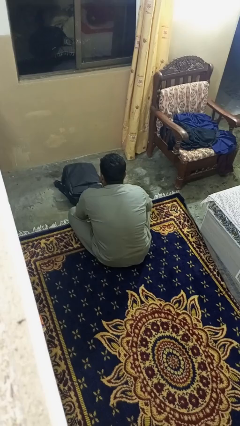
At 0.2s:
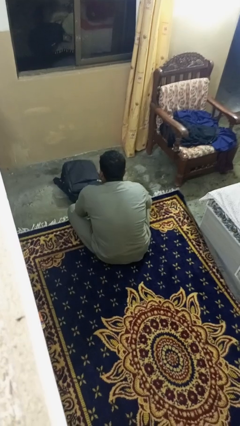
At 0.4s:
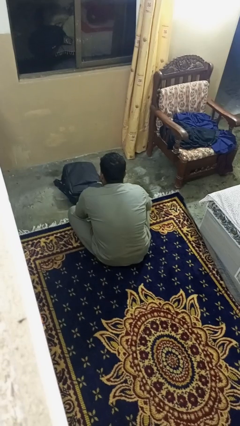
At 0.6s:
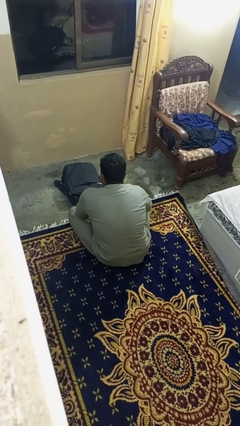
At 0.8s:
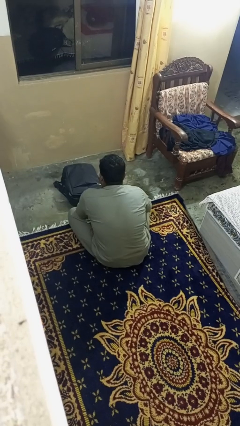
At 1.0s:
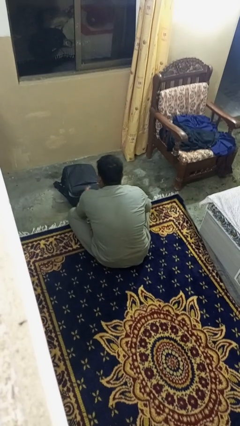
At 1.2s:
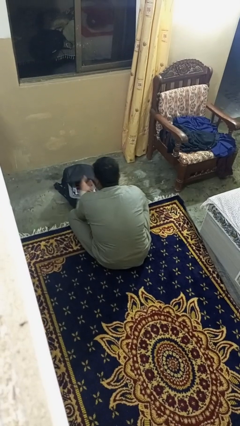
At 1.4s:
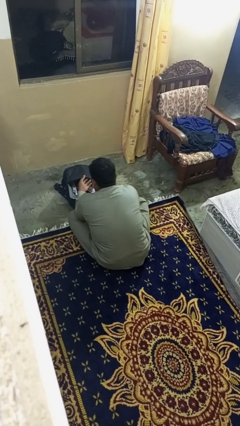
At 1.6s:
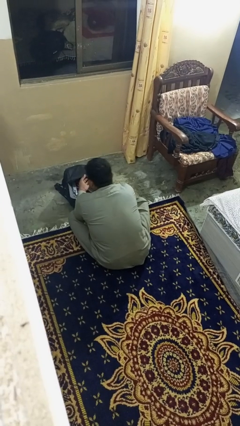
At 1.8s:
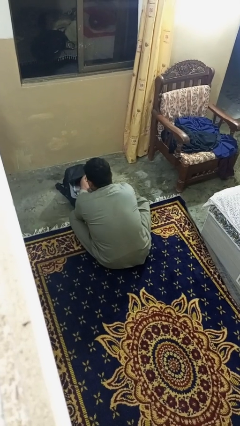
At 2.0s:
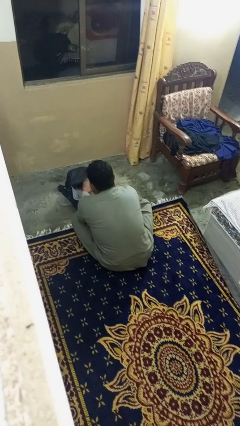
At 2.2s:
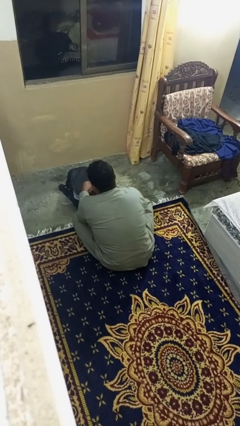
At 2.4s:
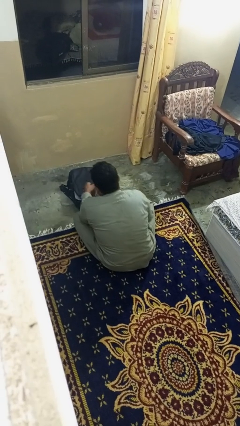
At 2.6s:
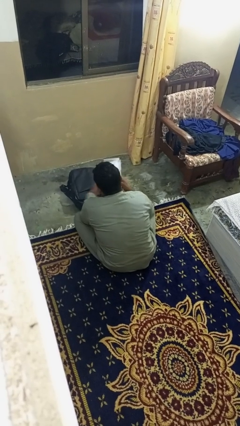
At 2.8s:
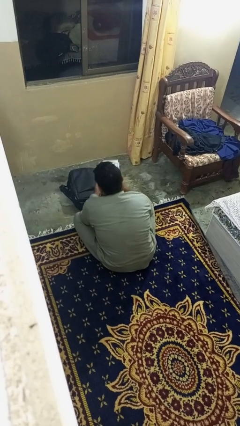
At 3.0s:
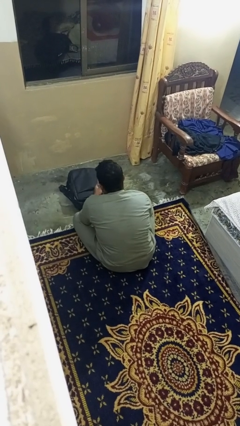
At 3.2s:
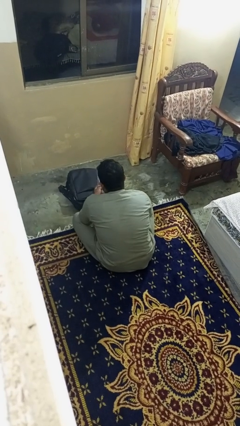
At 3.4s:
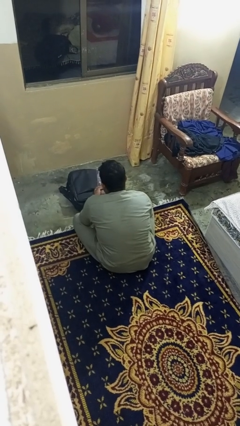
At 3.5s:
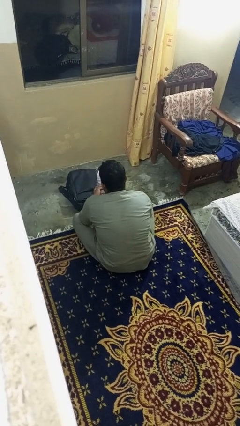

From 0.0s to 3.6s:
person takes object from bag

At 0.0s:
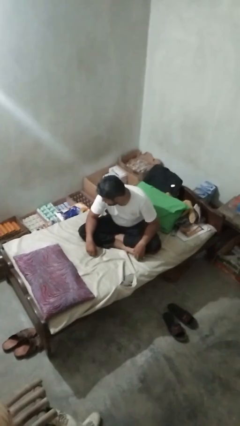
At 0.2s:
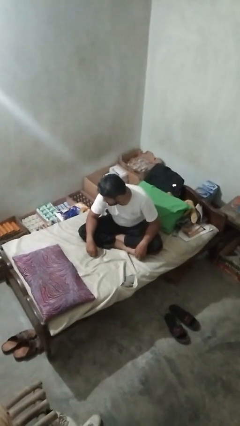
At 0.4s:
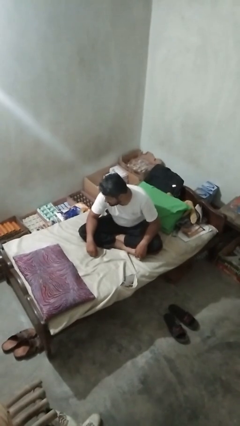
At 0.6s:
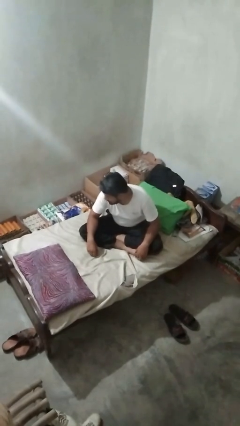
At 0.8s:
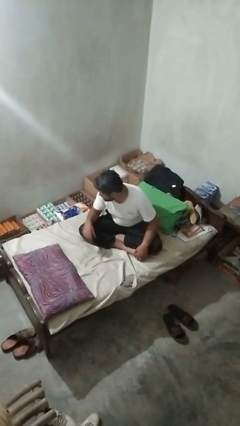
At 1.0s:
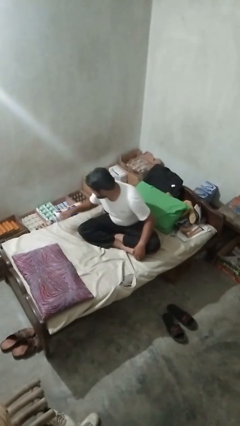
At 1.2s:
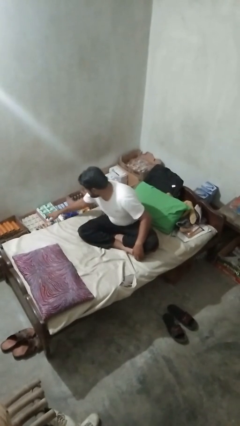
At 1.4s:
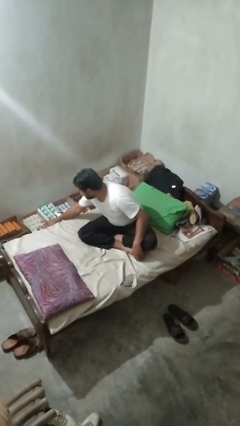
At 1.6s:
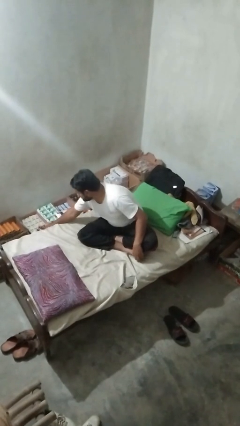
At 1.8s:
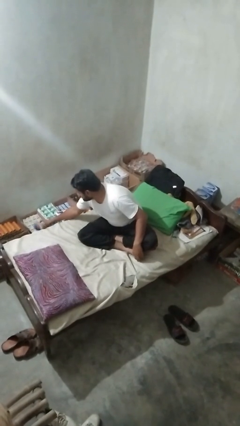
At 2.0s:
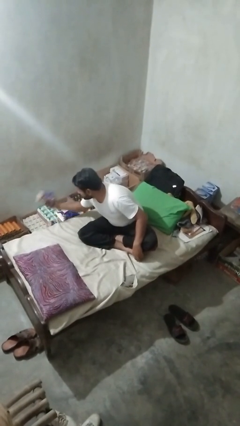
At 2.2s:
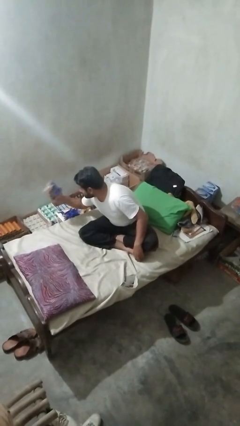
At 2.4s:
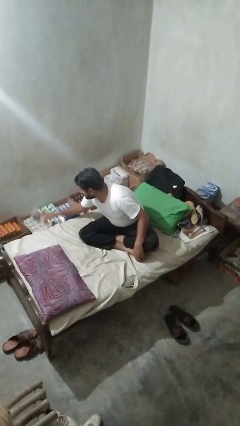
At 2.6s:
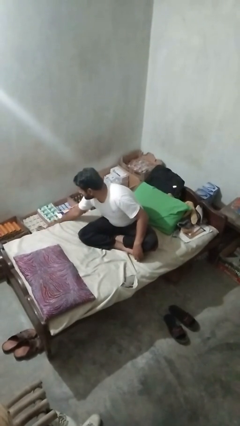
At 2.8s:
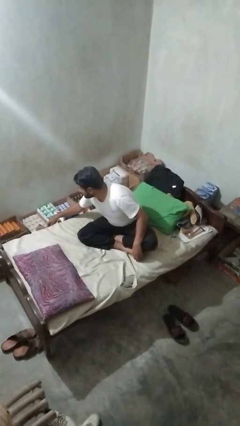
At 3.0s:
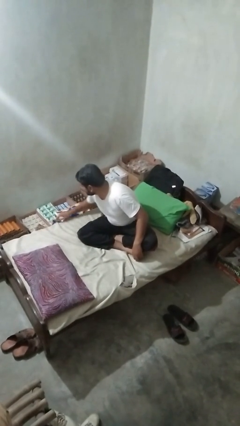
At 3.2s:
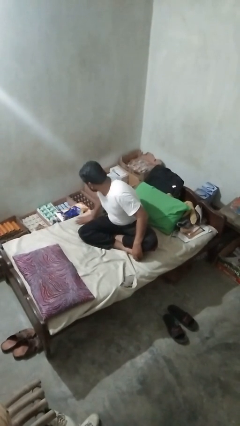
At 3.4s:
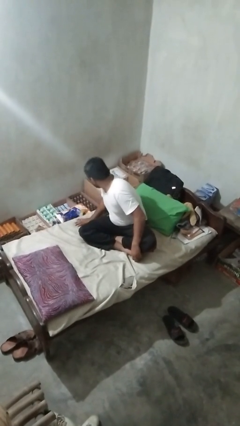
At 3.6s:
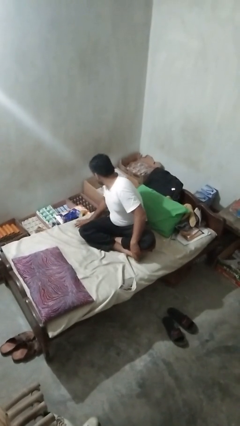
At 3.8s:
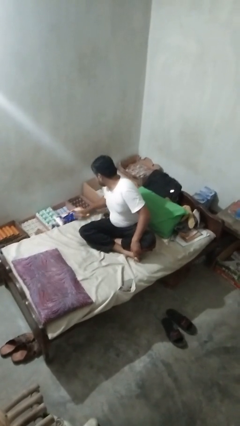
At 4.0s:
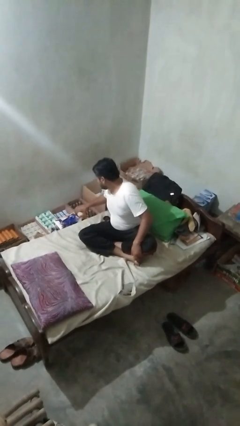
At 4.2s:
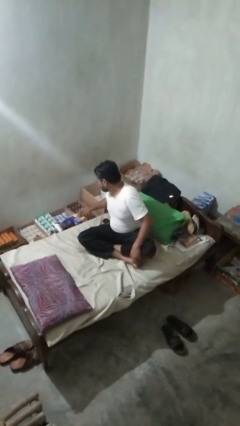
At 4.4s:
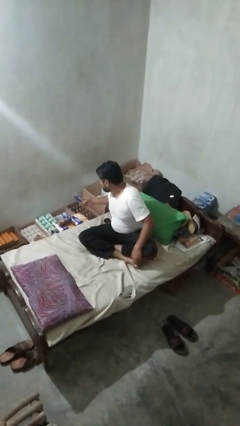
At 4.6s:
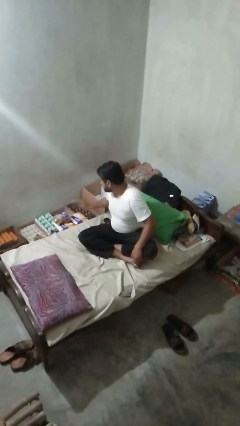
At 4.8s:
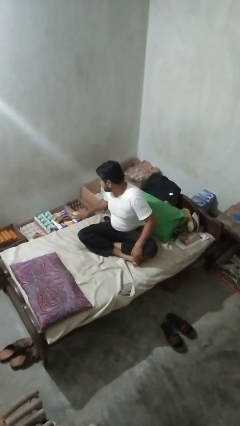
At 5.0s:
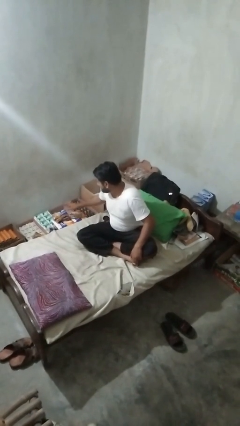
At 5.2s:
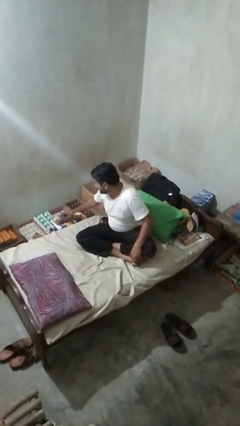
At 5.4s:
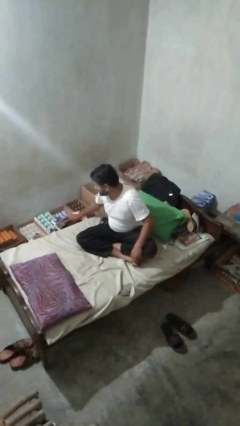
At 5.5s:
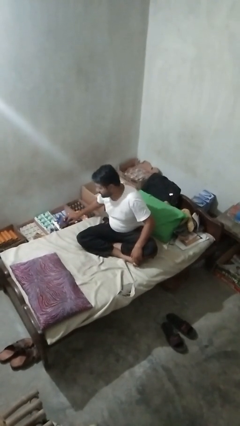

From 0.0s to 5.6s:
person searches under bed

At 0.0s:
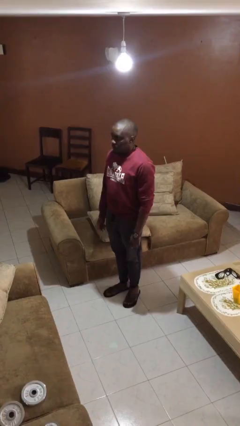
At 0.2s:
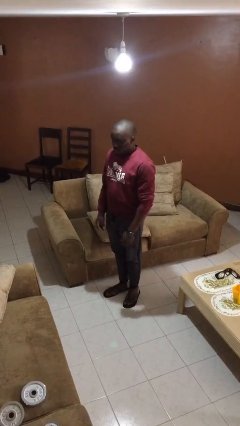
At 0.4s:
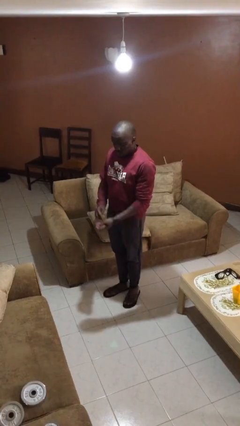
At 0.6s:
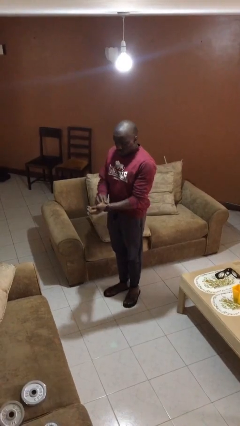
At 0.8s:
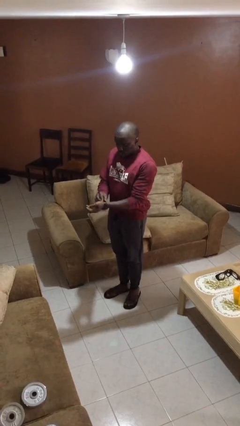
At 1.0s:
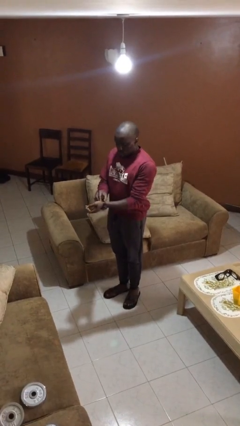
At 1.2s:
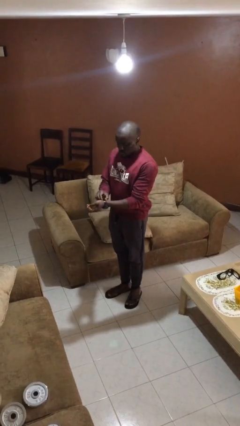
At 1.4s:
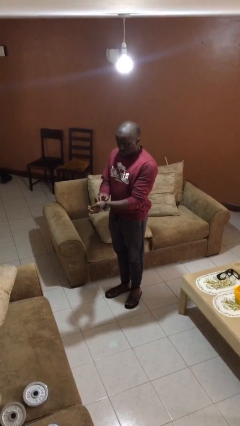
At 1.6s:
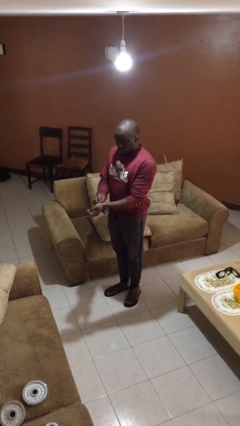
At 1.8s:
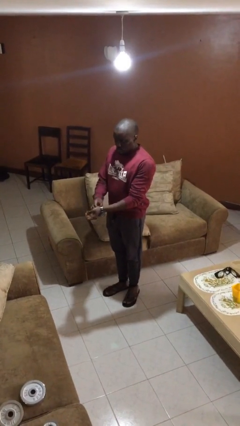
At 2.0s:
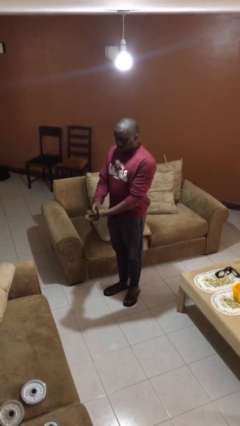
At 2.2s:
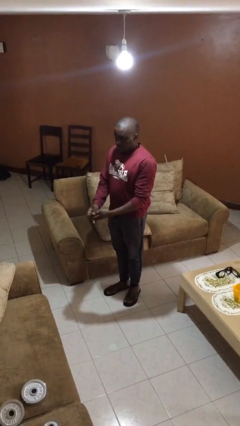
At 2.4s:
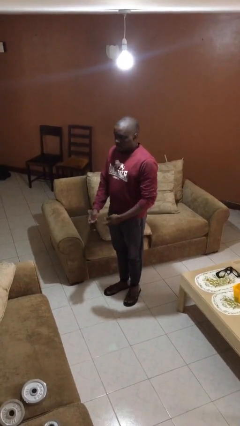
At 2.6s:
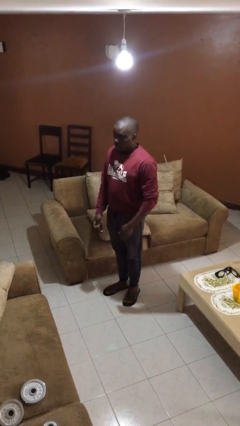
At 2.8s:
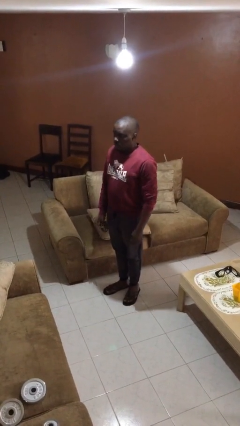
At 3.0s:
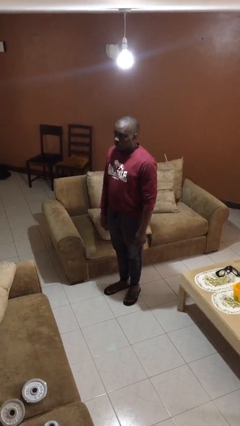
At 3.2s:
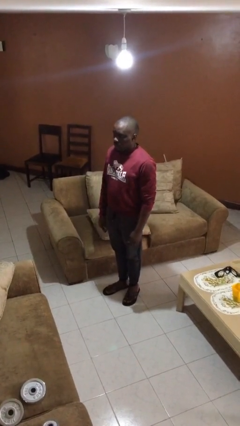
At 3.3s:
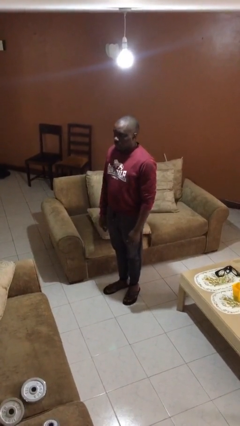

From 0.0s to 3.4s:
person takes off wristwatch

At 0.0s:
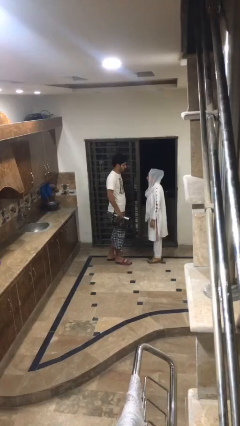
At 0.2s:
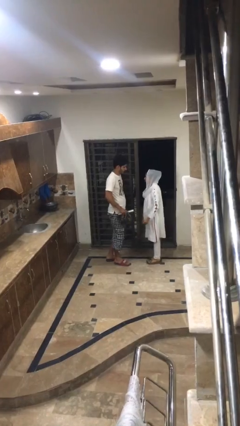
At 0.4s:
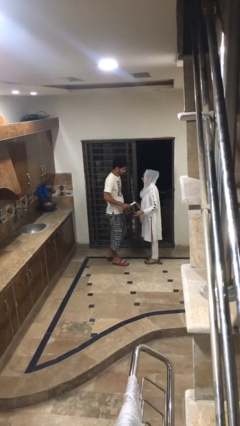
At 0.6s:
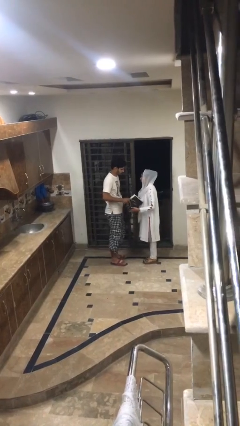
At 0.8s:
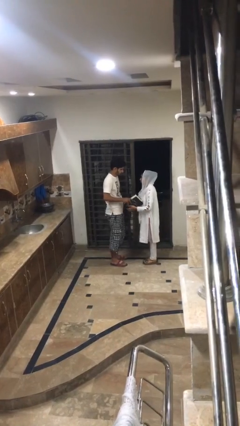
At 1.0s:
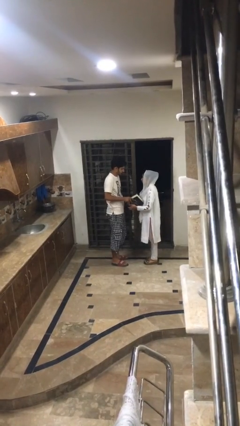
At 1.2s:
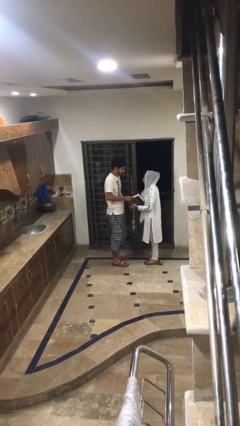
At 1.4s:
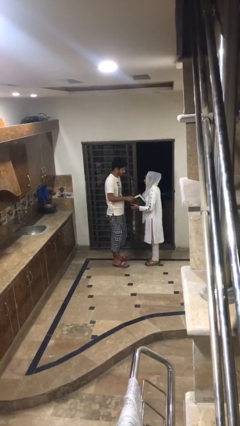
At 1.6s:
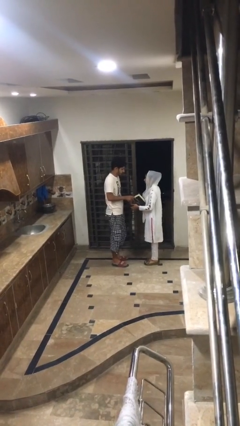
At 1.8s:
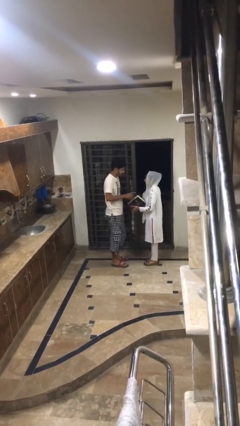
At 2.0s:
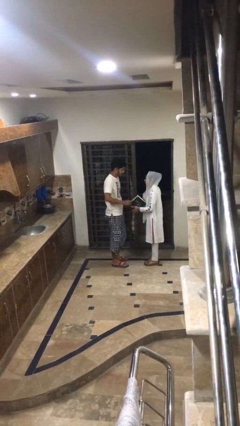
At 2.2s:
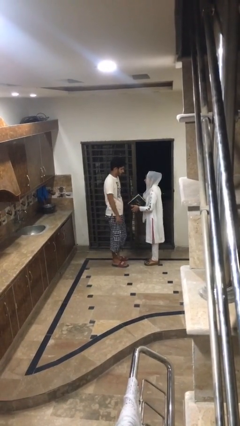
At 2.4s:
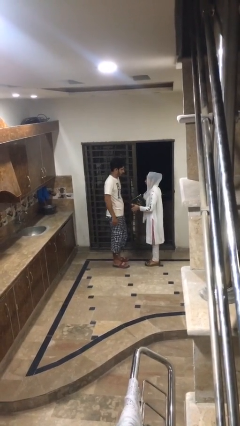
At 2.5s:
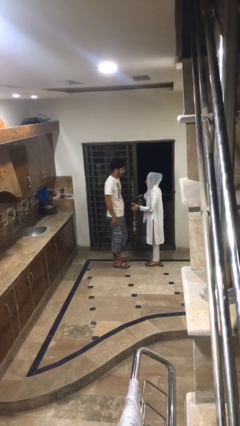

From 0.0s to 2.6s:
person transfers object to person

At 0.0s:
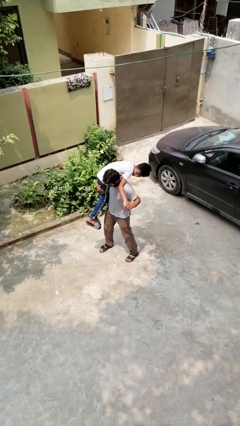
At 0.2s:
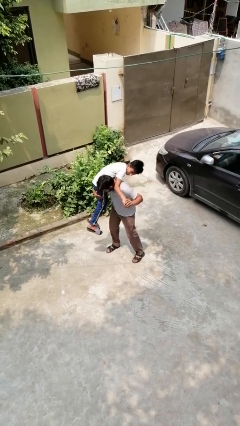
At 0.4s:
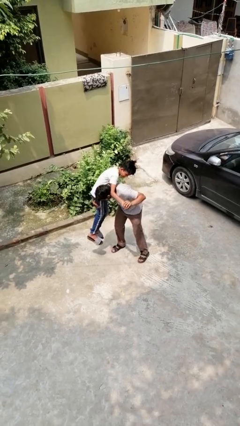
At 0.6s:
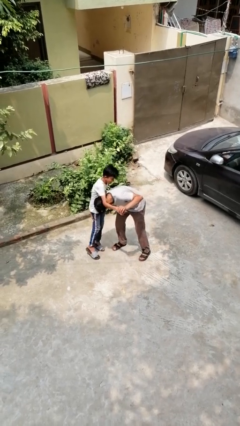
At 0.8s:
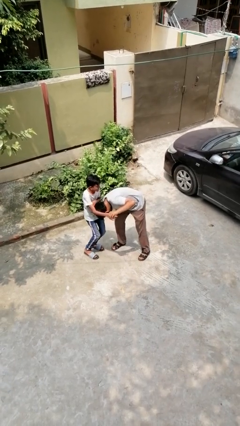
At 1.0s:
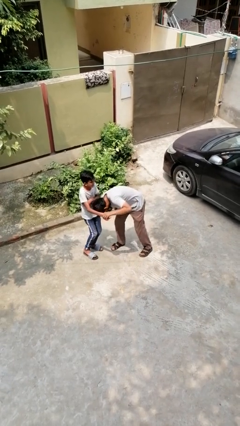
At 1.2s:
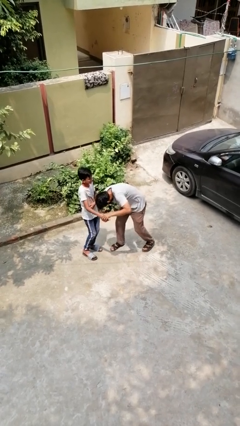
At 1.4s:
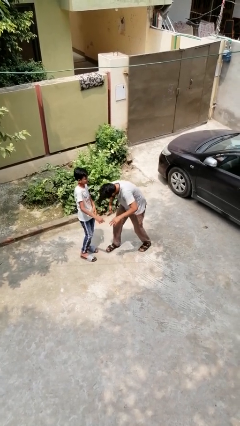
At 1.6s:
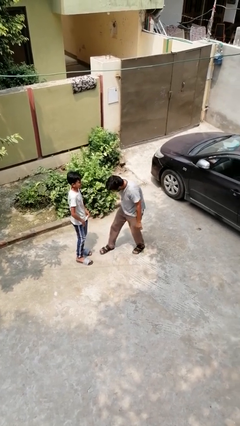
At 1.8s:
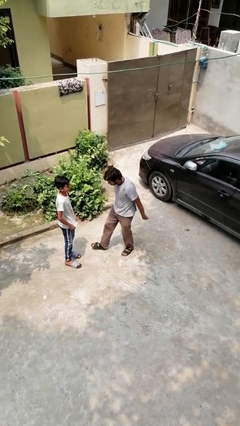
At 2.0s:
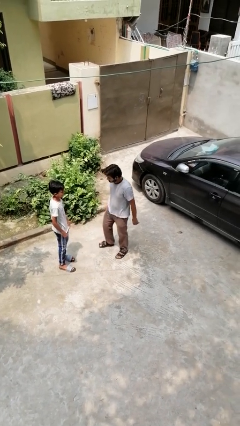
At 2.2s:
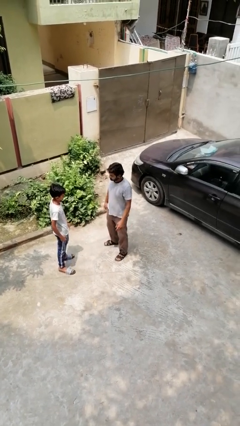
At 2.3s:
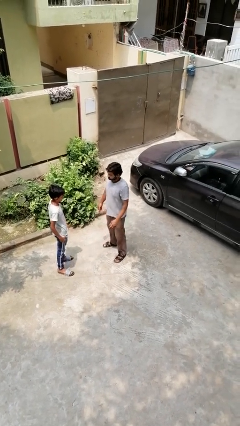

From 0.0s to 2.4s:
person puts down person
